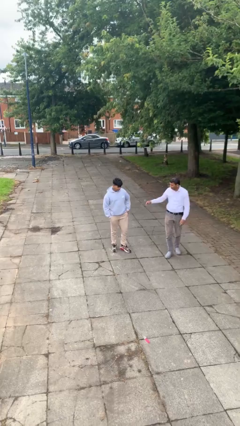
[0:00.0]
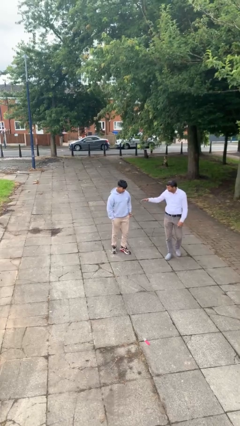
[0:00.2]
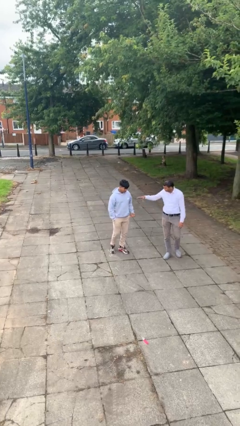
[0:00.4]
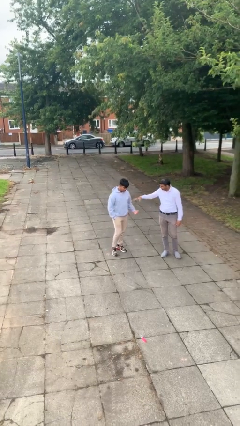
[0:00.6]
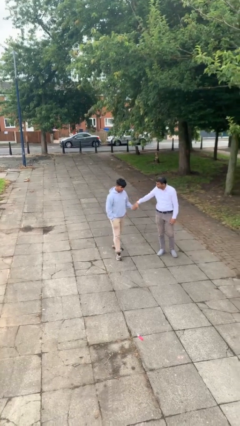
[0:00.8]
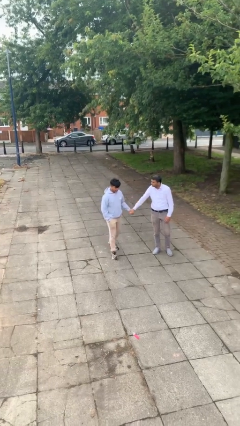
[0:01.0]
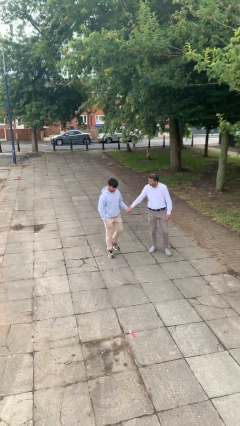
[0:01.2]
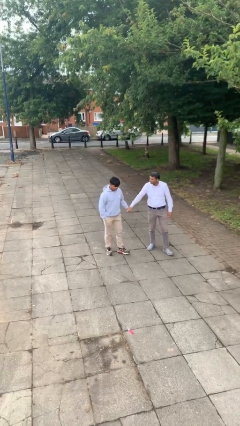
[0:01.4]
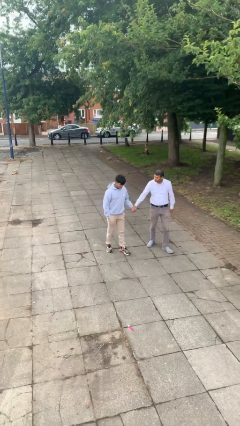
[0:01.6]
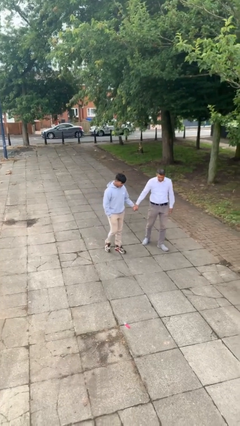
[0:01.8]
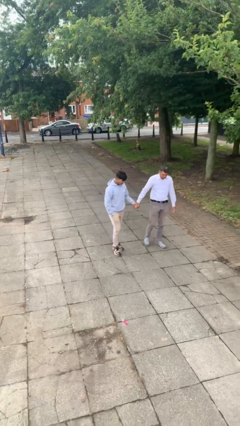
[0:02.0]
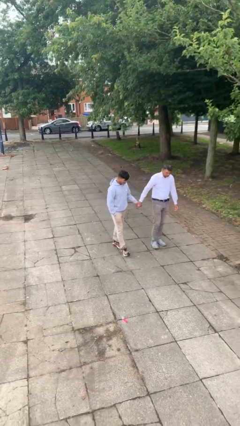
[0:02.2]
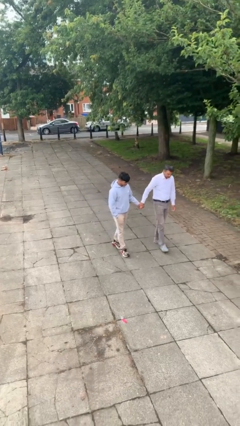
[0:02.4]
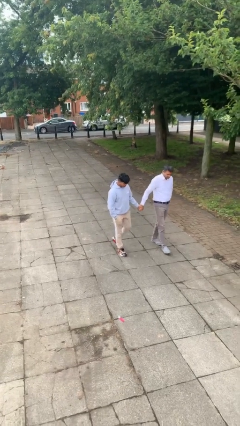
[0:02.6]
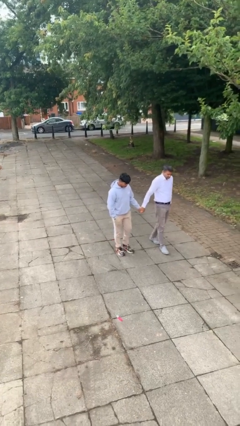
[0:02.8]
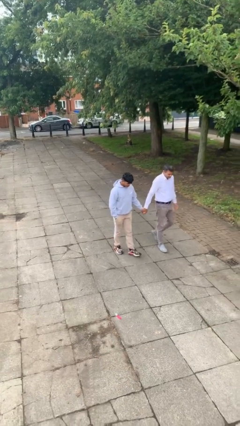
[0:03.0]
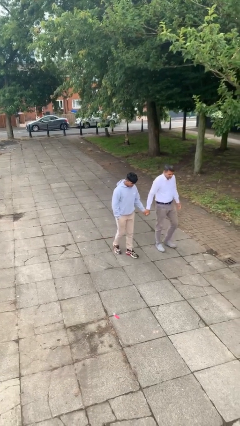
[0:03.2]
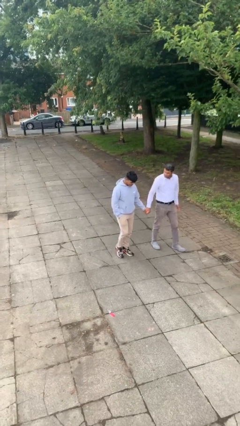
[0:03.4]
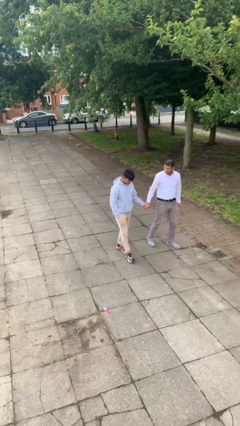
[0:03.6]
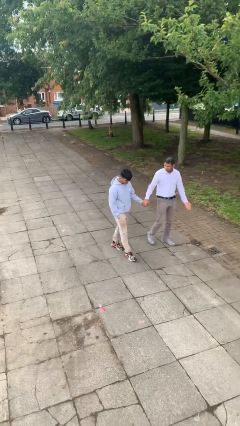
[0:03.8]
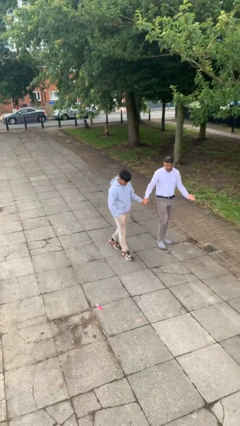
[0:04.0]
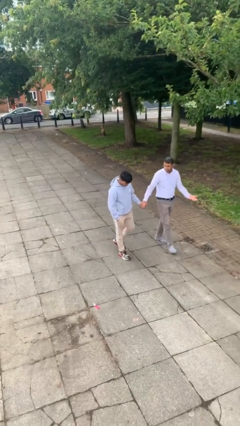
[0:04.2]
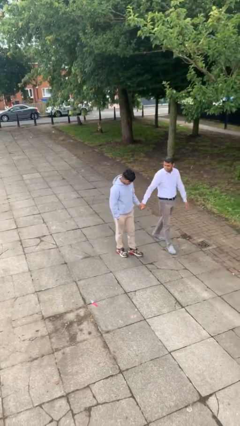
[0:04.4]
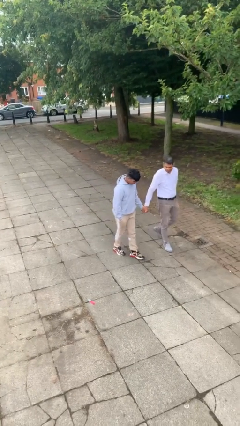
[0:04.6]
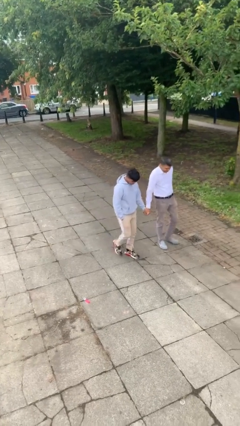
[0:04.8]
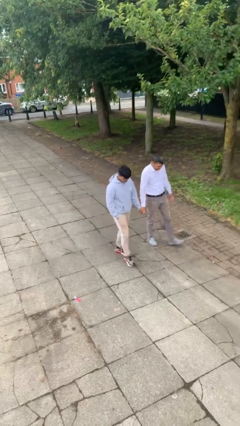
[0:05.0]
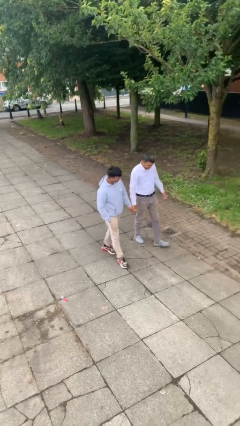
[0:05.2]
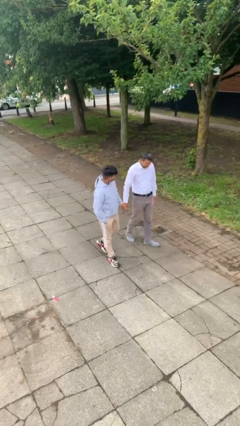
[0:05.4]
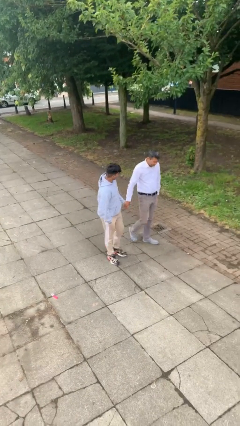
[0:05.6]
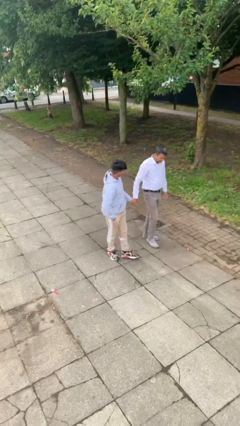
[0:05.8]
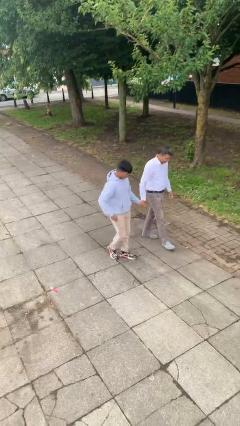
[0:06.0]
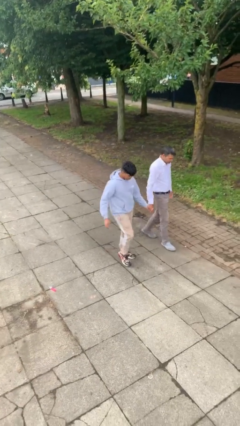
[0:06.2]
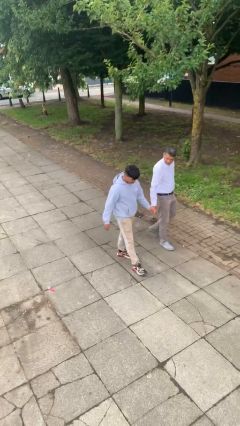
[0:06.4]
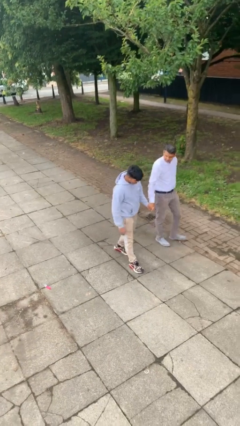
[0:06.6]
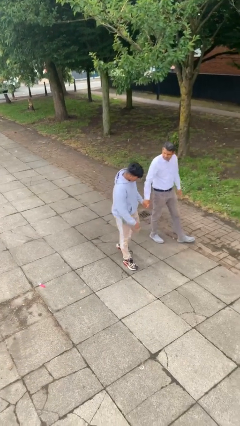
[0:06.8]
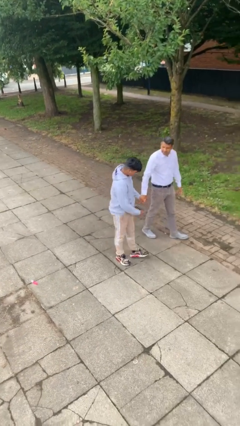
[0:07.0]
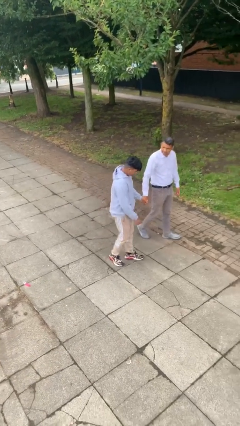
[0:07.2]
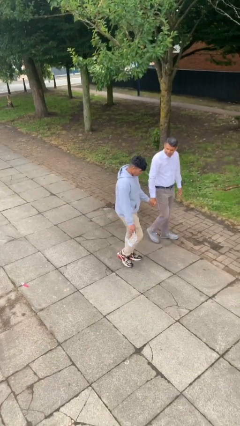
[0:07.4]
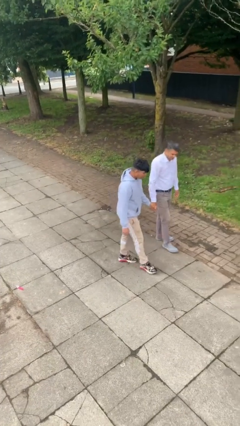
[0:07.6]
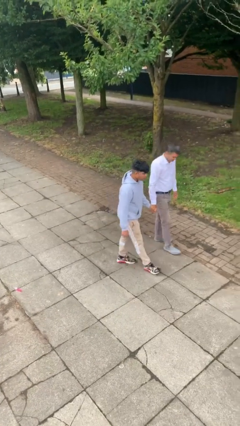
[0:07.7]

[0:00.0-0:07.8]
person holds hand

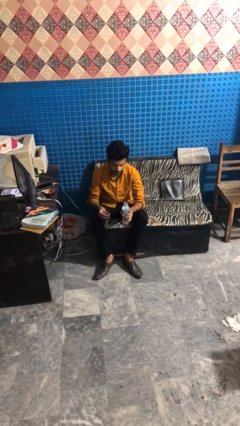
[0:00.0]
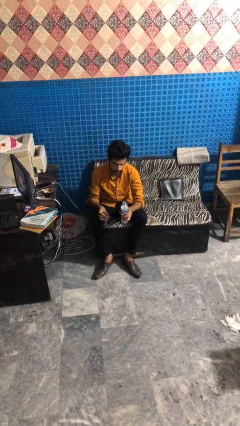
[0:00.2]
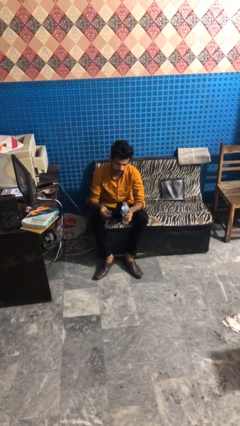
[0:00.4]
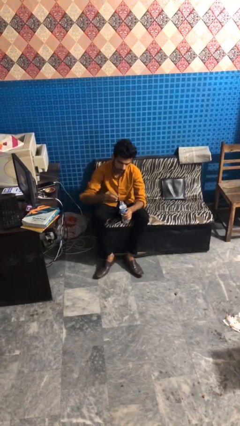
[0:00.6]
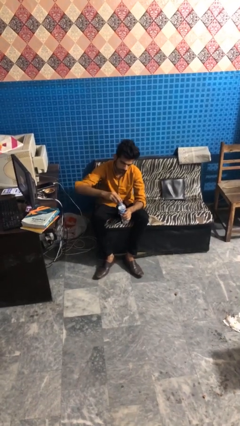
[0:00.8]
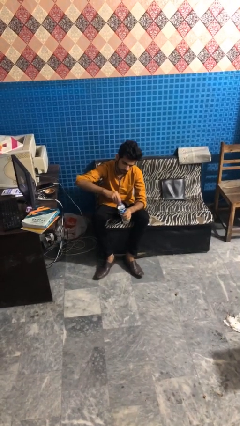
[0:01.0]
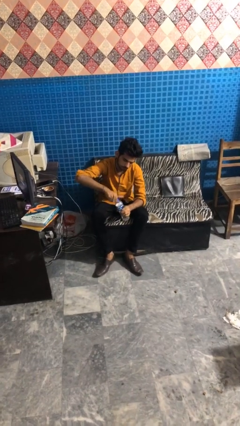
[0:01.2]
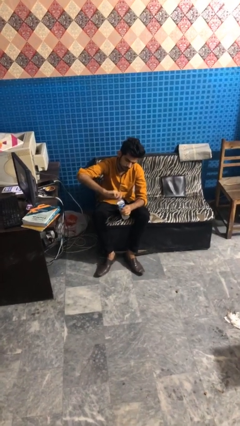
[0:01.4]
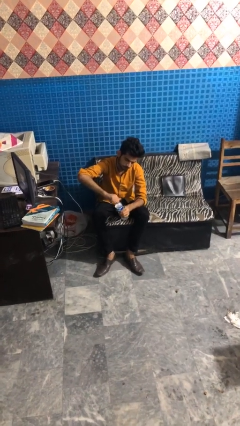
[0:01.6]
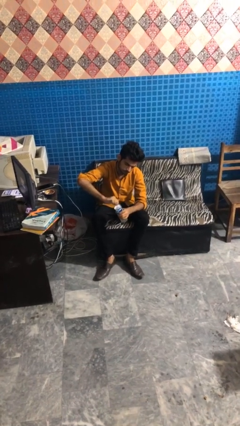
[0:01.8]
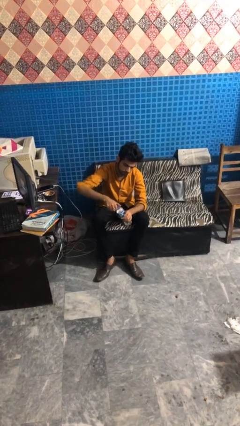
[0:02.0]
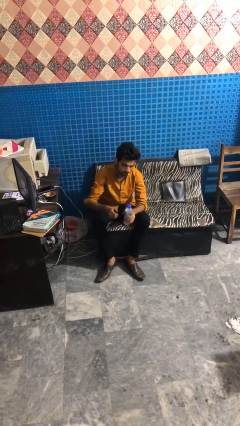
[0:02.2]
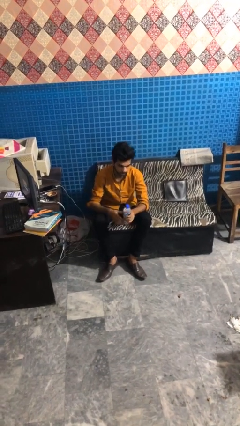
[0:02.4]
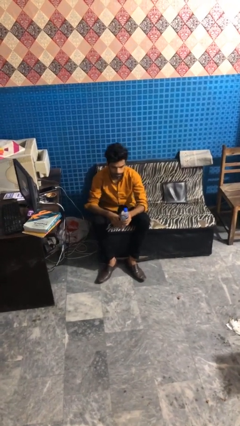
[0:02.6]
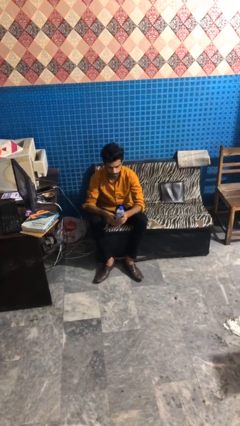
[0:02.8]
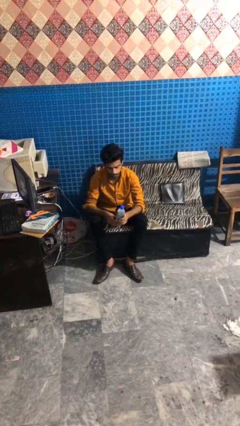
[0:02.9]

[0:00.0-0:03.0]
person screws lid to bottle

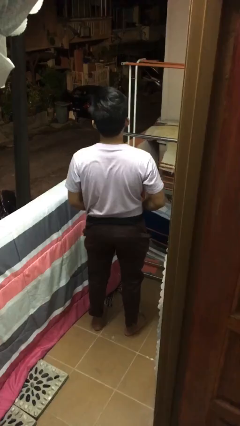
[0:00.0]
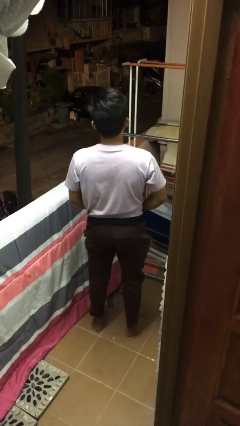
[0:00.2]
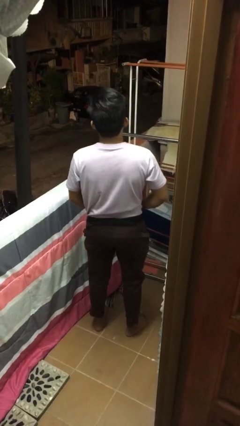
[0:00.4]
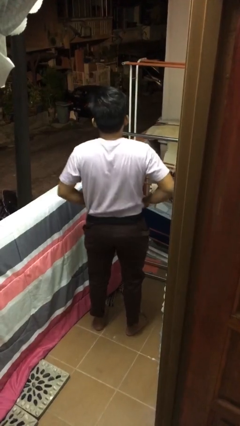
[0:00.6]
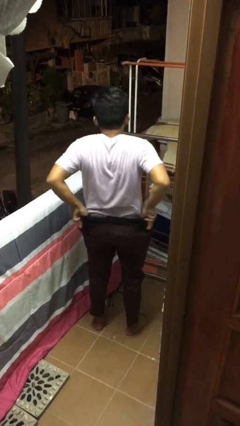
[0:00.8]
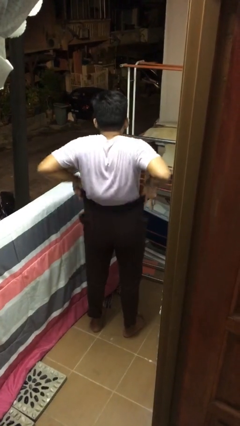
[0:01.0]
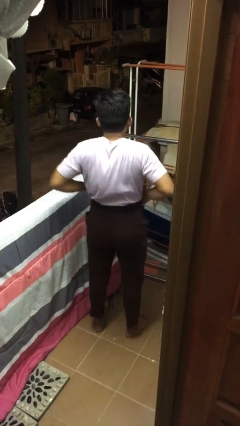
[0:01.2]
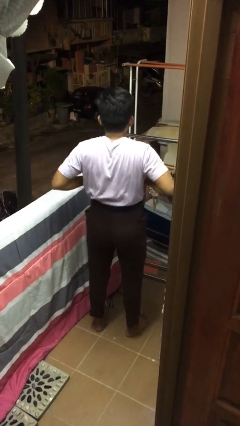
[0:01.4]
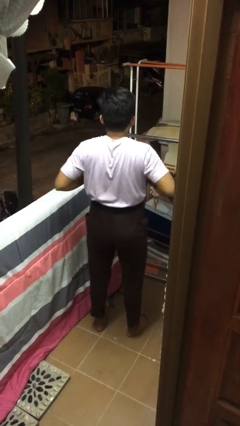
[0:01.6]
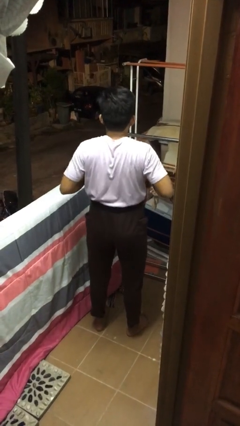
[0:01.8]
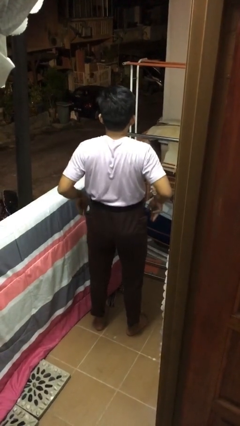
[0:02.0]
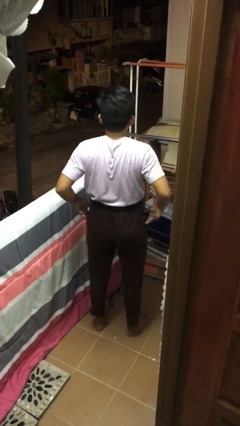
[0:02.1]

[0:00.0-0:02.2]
person hikes up pants

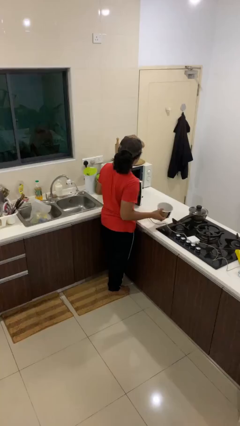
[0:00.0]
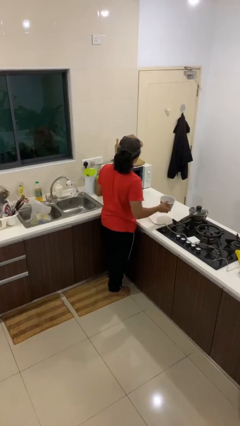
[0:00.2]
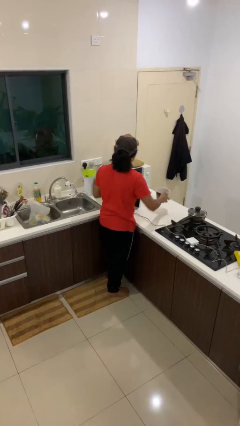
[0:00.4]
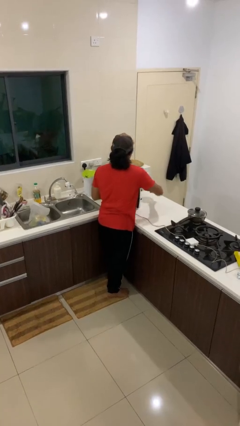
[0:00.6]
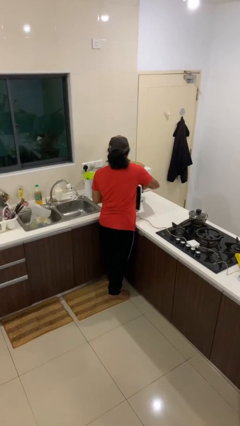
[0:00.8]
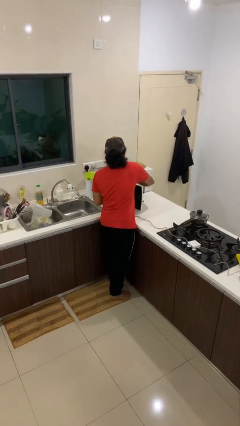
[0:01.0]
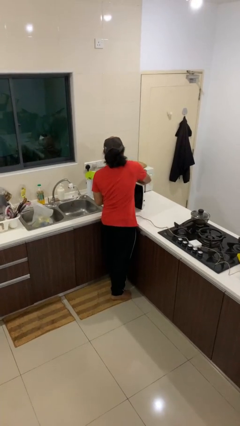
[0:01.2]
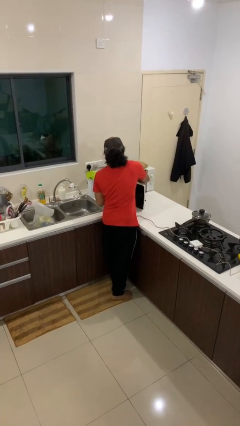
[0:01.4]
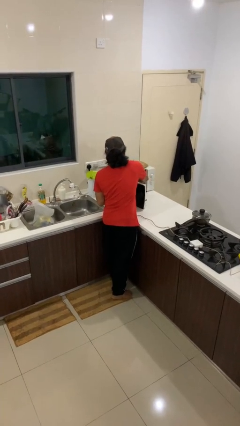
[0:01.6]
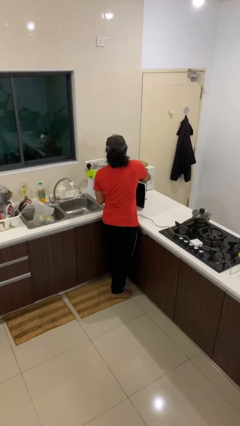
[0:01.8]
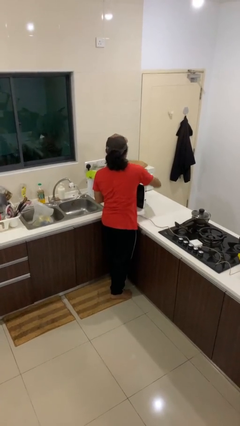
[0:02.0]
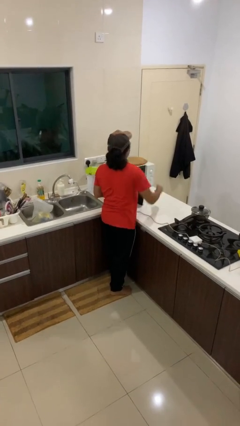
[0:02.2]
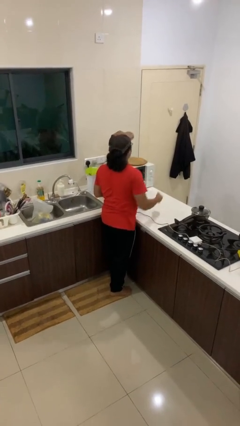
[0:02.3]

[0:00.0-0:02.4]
person puts object into microwave

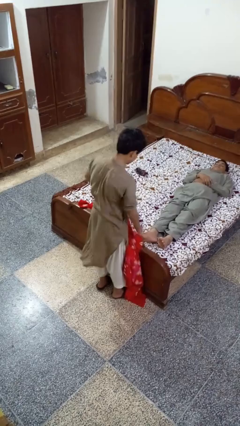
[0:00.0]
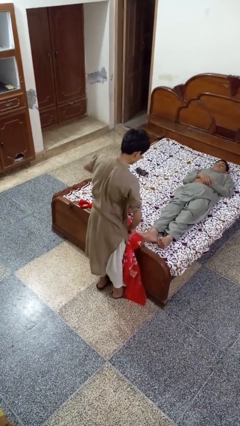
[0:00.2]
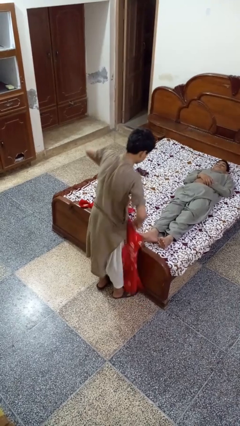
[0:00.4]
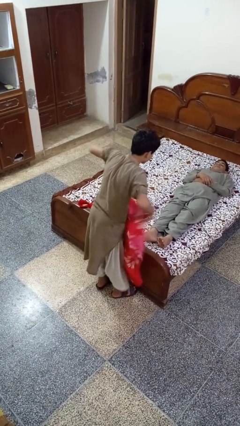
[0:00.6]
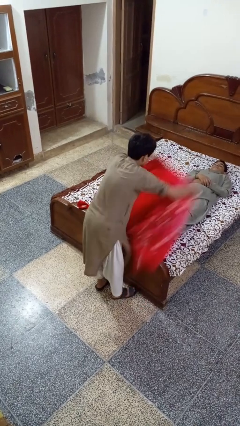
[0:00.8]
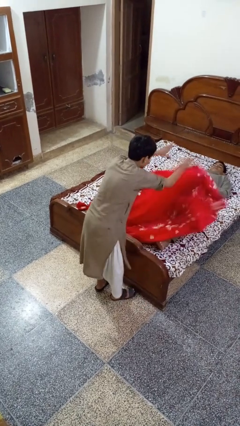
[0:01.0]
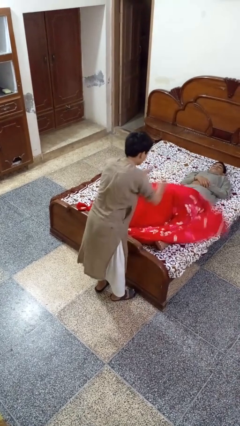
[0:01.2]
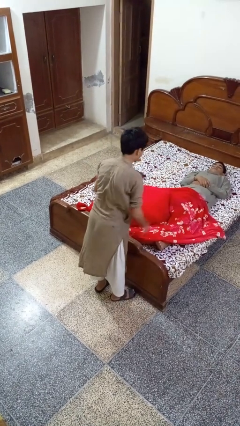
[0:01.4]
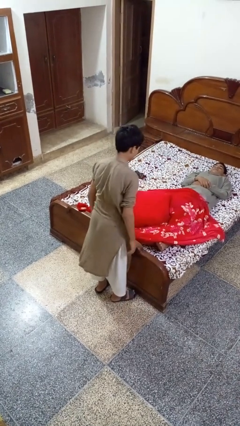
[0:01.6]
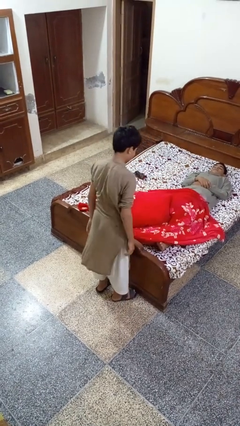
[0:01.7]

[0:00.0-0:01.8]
person covers friend with blanket

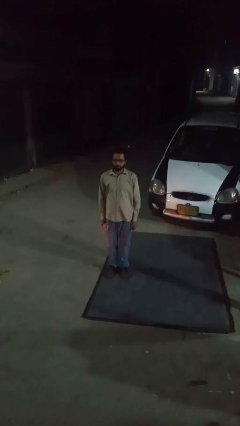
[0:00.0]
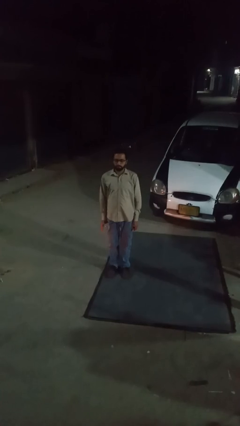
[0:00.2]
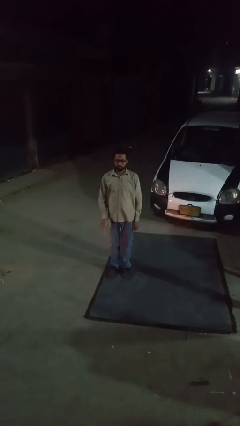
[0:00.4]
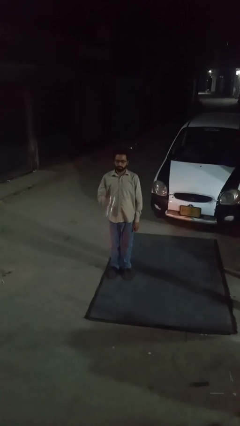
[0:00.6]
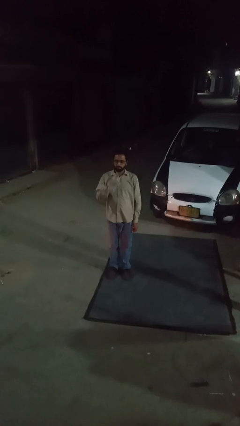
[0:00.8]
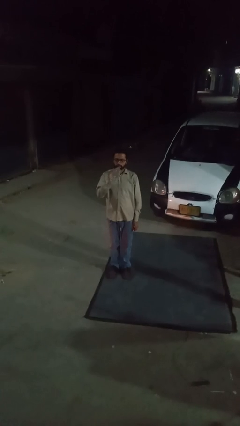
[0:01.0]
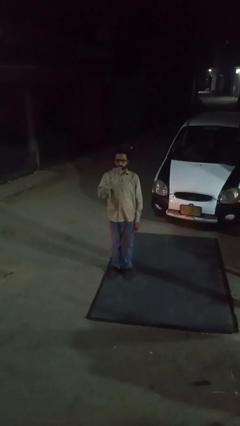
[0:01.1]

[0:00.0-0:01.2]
person drinks from bottle
